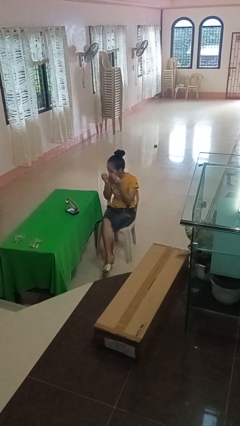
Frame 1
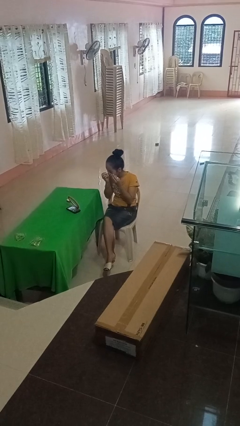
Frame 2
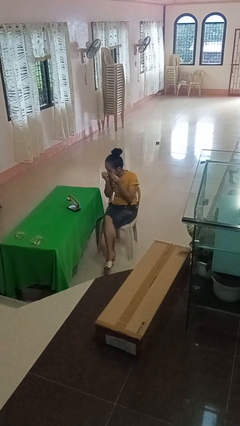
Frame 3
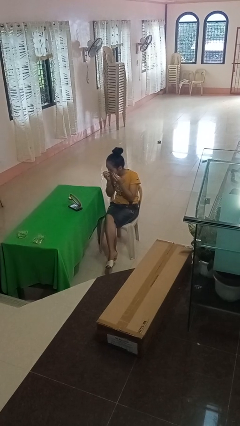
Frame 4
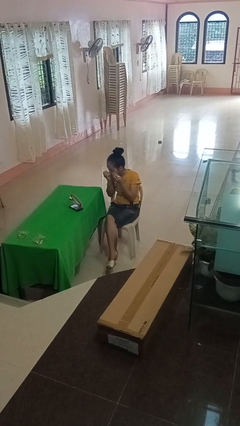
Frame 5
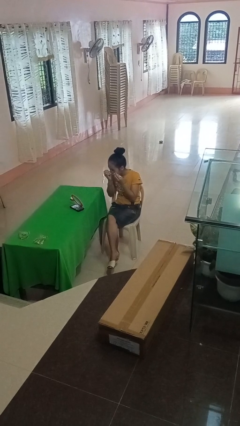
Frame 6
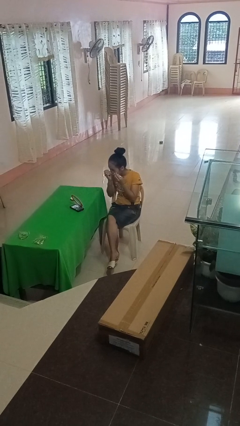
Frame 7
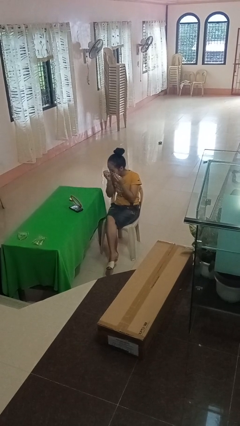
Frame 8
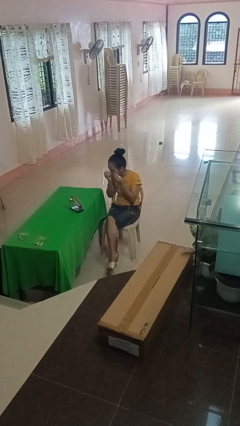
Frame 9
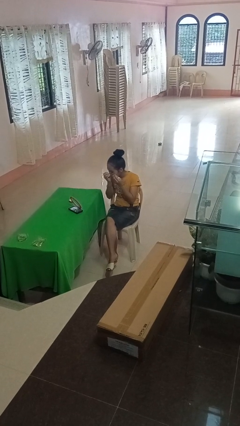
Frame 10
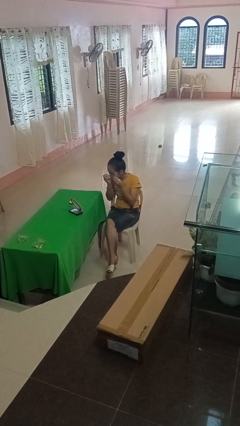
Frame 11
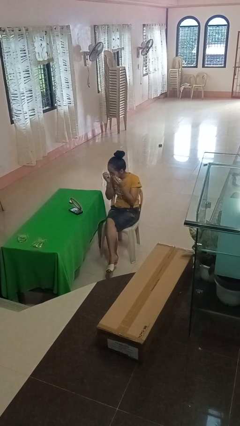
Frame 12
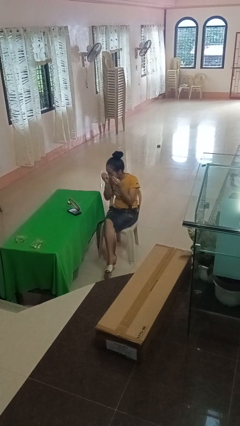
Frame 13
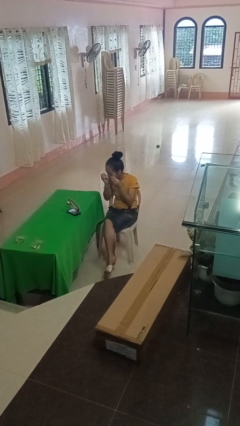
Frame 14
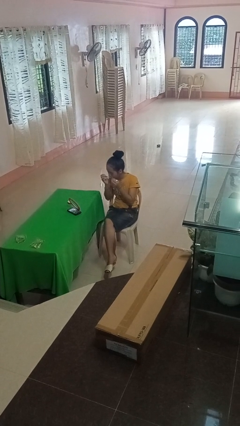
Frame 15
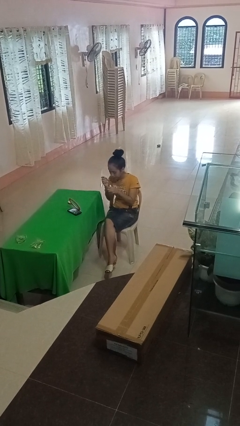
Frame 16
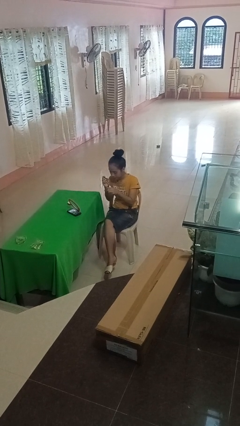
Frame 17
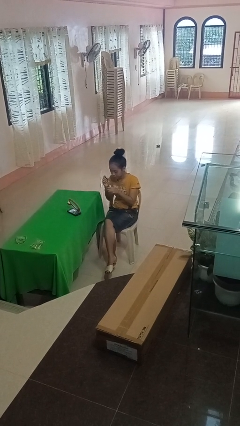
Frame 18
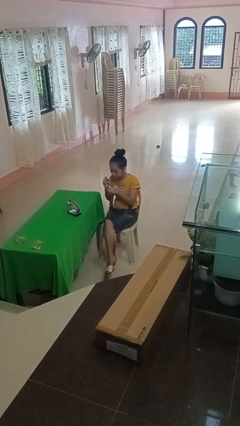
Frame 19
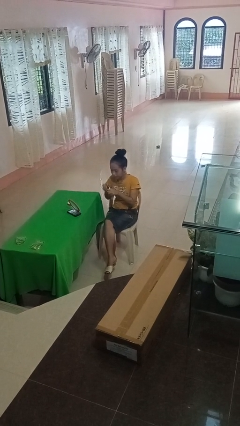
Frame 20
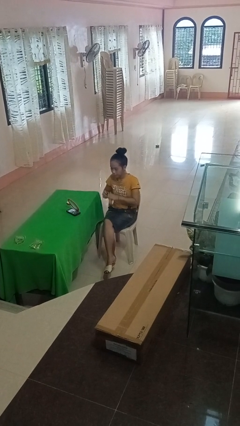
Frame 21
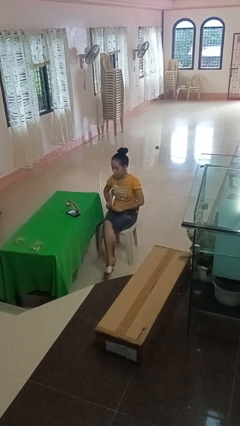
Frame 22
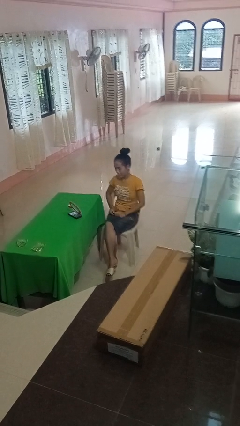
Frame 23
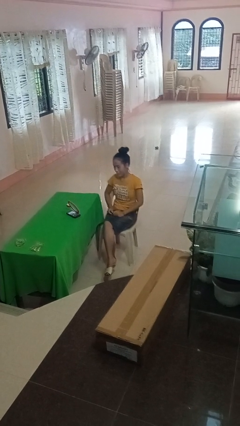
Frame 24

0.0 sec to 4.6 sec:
person applies eye makeup

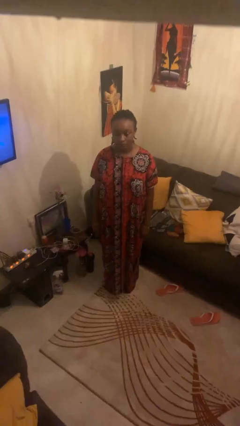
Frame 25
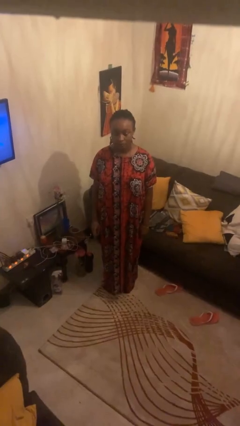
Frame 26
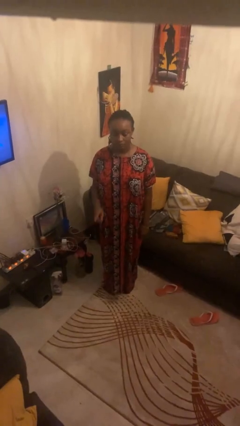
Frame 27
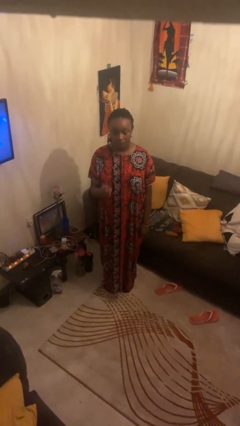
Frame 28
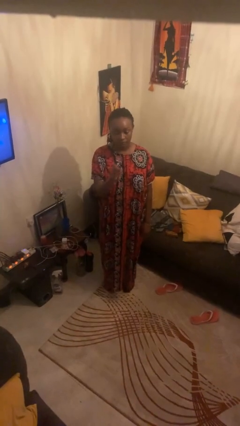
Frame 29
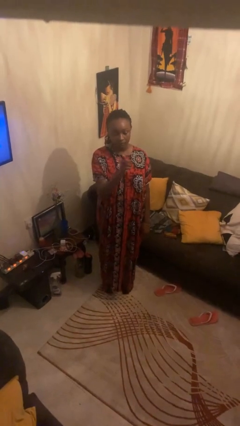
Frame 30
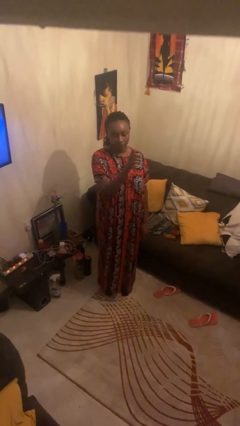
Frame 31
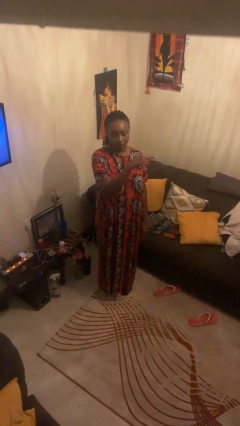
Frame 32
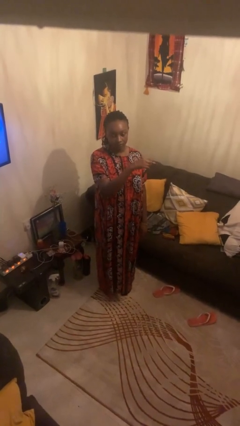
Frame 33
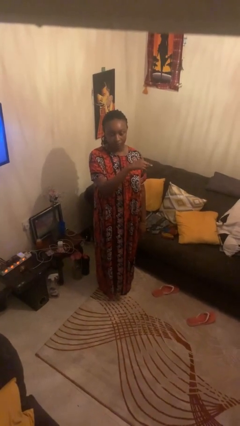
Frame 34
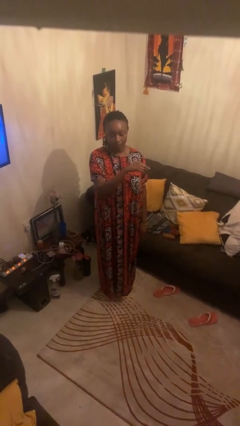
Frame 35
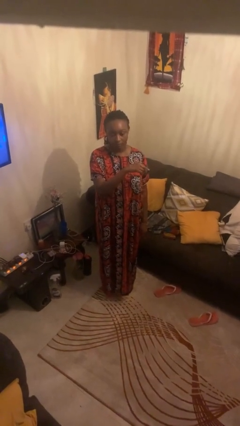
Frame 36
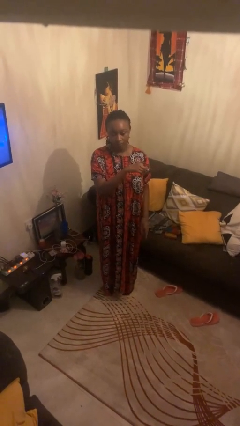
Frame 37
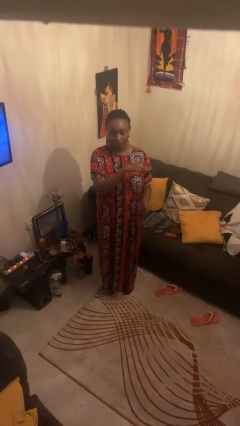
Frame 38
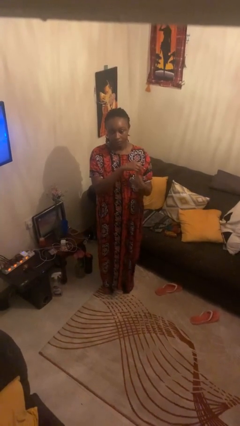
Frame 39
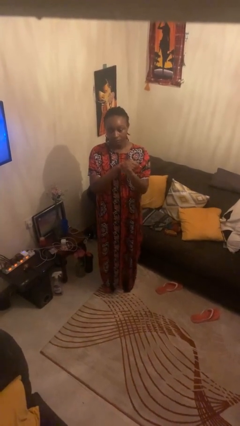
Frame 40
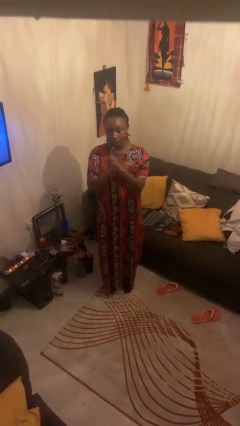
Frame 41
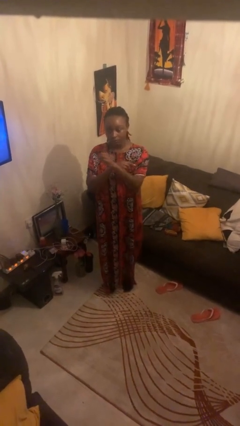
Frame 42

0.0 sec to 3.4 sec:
person gestures swipe left

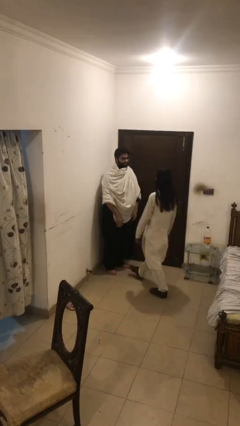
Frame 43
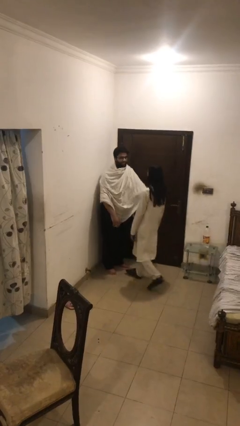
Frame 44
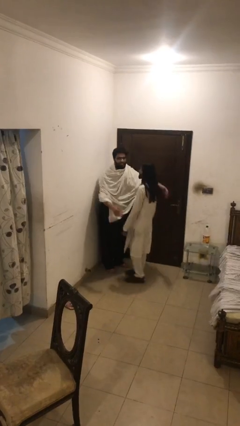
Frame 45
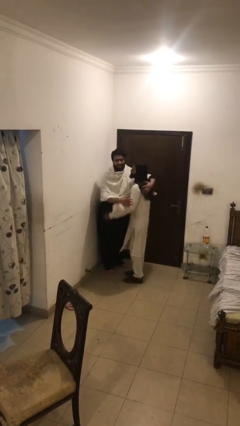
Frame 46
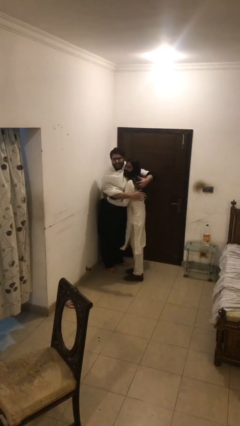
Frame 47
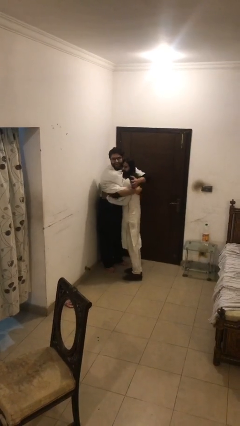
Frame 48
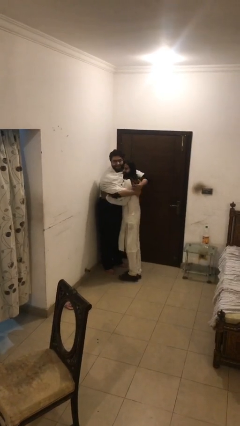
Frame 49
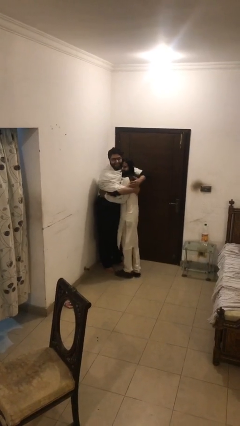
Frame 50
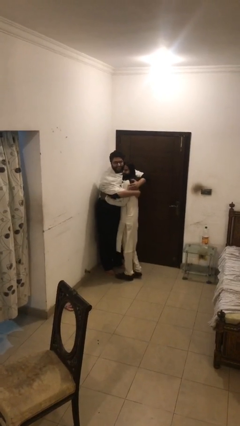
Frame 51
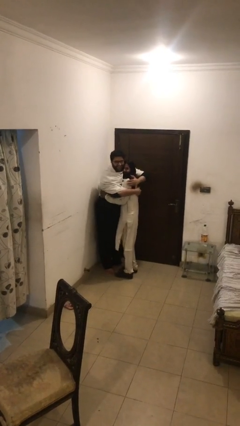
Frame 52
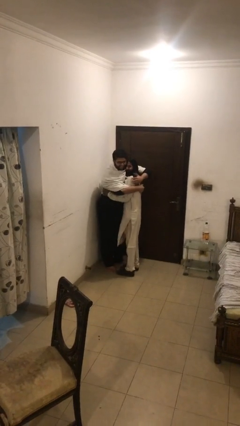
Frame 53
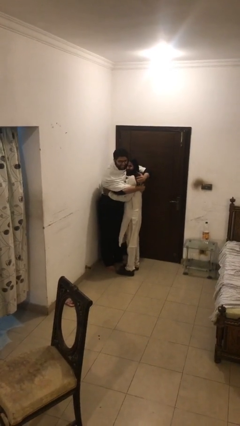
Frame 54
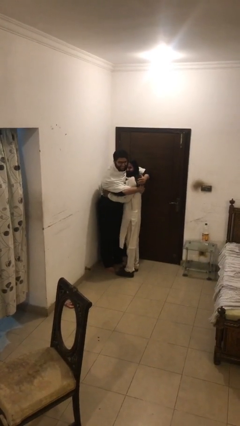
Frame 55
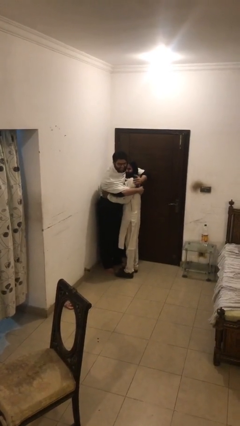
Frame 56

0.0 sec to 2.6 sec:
person embraces person

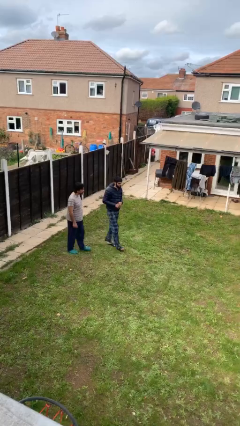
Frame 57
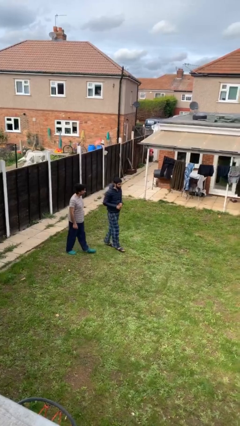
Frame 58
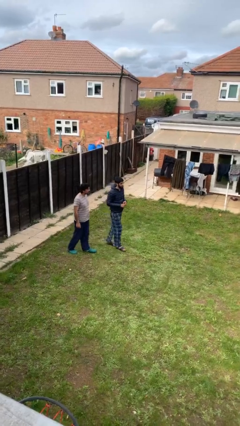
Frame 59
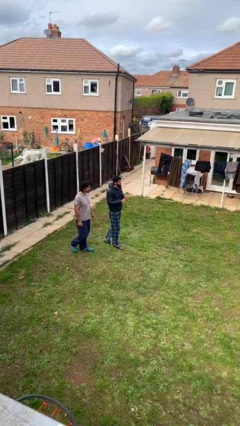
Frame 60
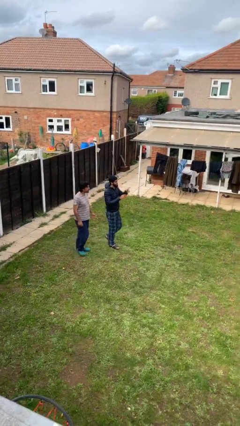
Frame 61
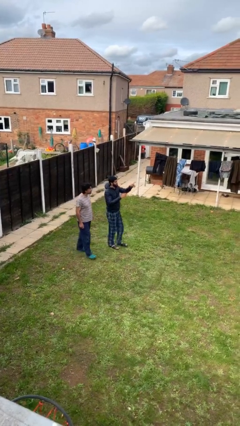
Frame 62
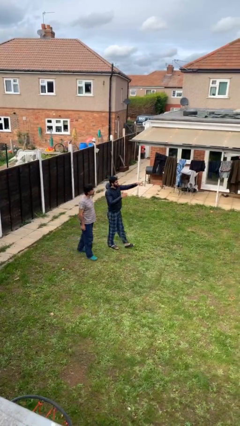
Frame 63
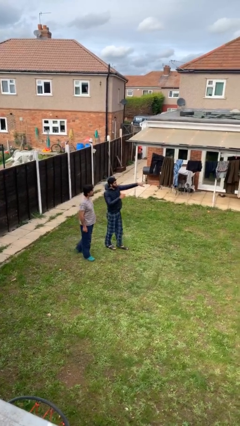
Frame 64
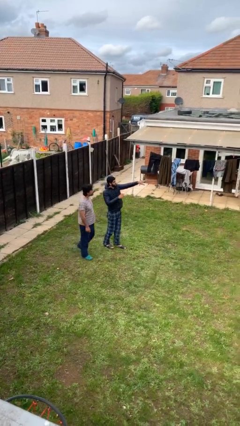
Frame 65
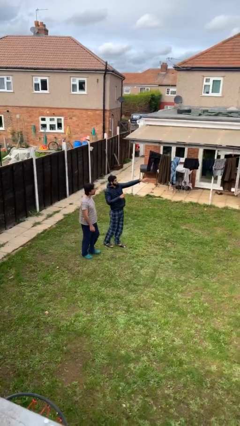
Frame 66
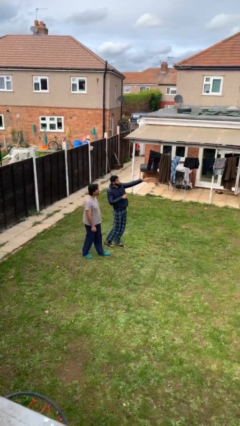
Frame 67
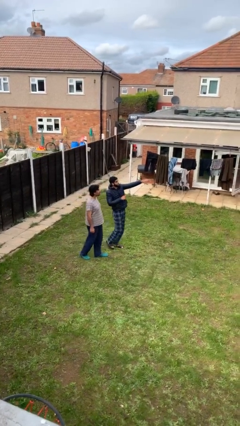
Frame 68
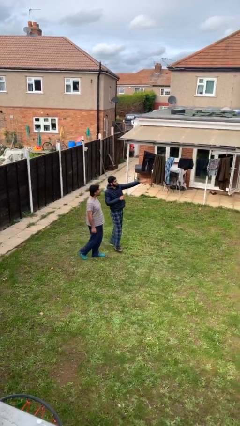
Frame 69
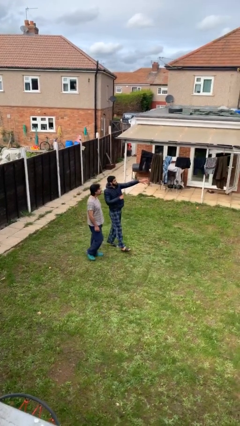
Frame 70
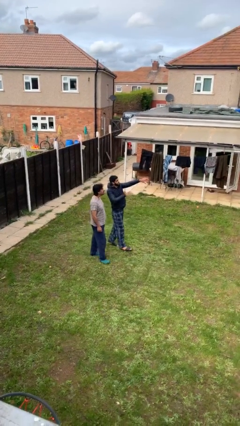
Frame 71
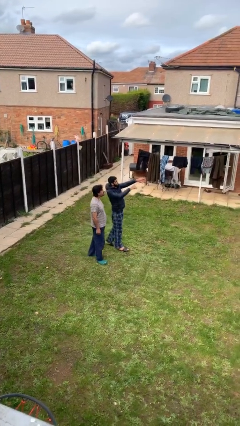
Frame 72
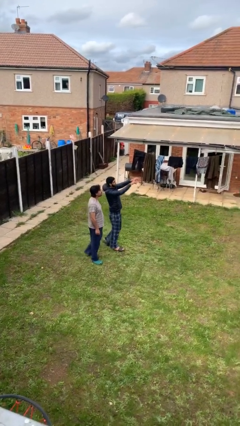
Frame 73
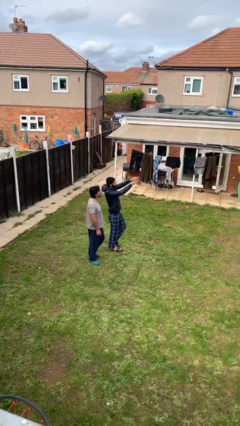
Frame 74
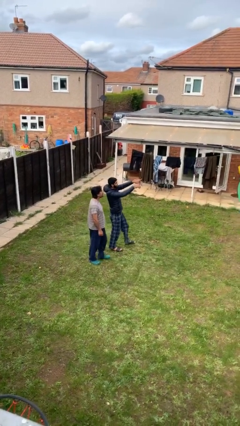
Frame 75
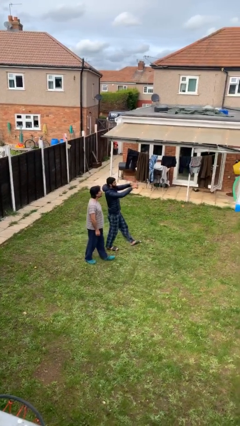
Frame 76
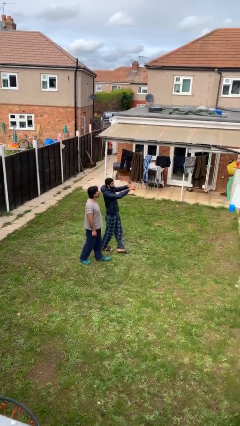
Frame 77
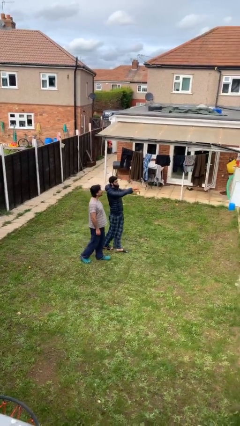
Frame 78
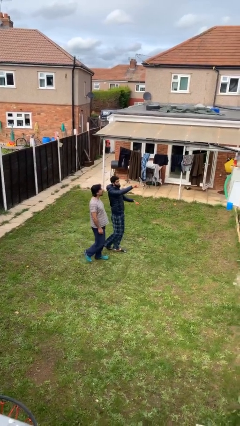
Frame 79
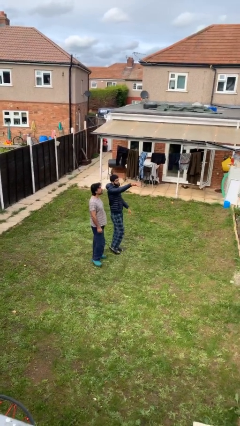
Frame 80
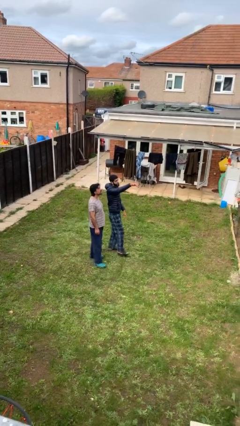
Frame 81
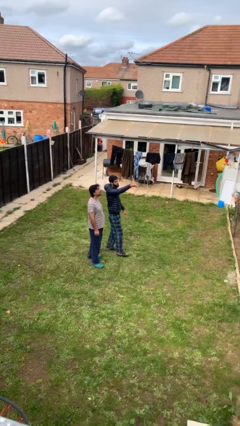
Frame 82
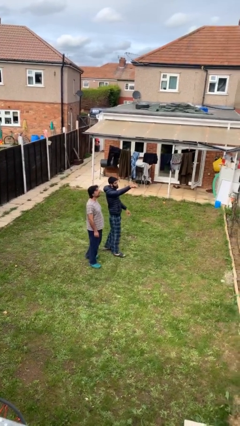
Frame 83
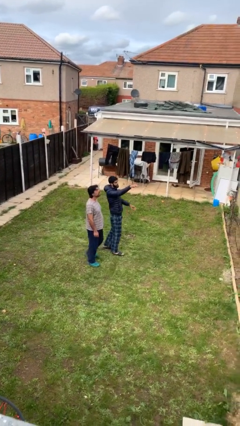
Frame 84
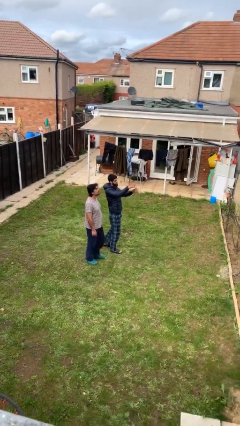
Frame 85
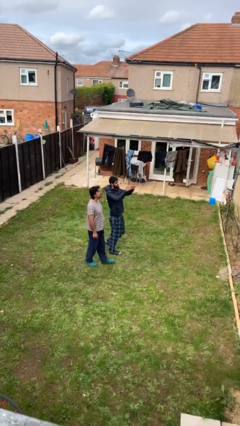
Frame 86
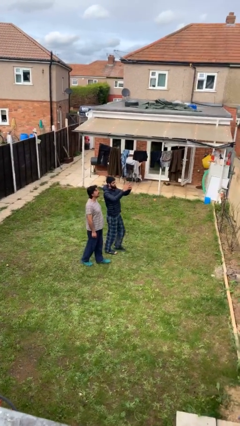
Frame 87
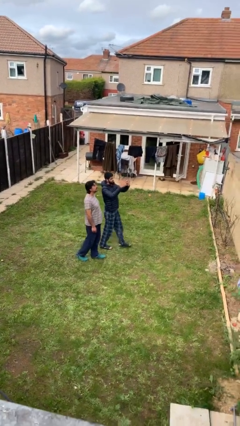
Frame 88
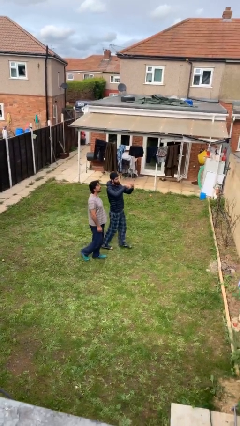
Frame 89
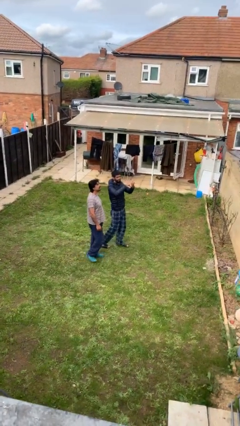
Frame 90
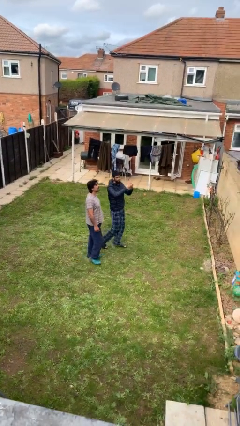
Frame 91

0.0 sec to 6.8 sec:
person talks to person

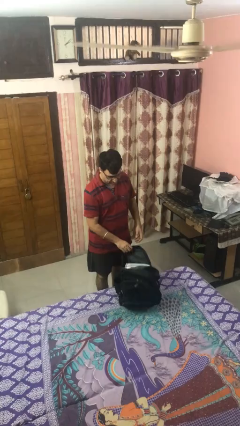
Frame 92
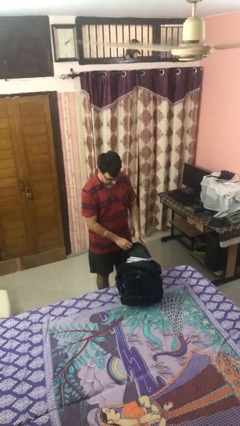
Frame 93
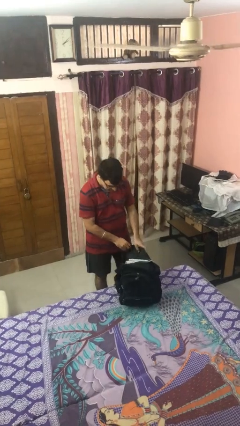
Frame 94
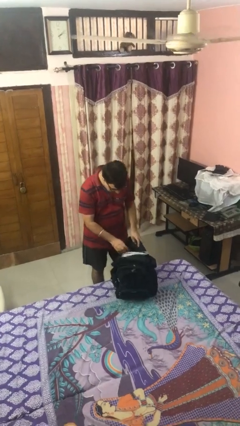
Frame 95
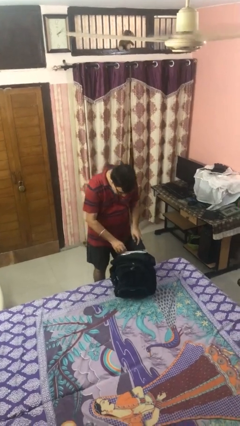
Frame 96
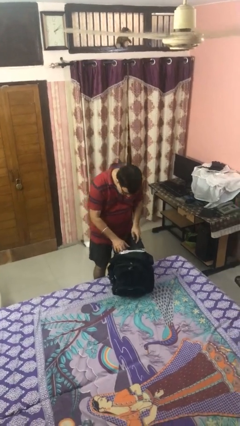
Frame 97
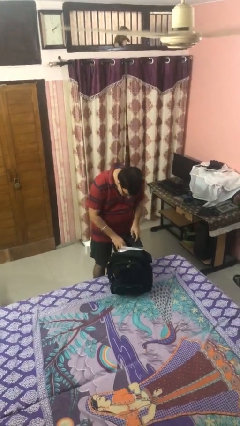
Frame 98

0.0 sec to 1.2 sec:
person searches in backpack
